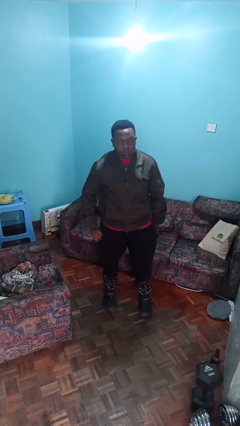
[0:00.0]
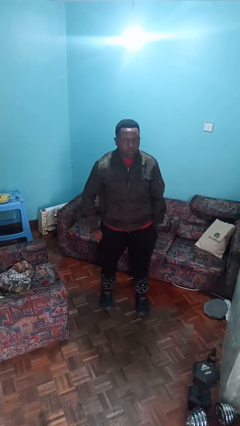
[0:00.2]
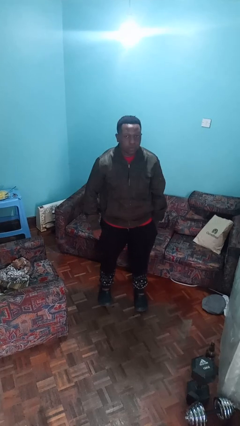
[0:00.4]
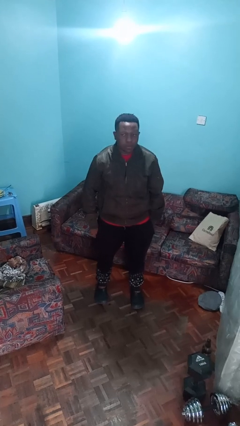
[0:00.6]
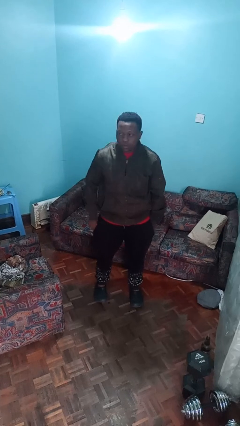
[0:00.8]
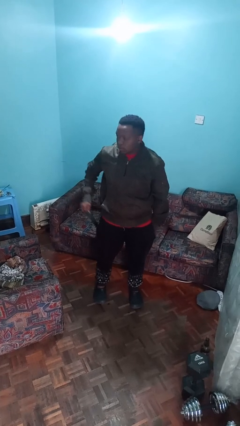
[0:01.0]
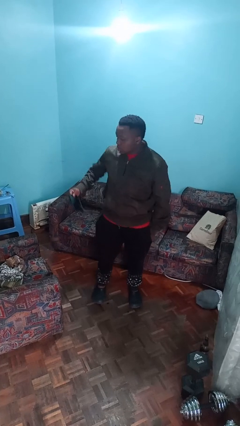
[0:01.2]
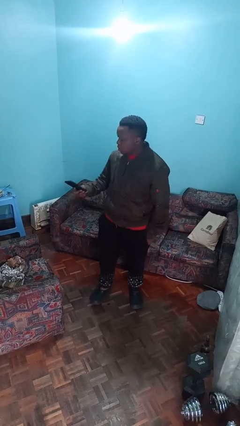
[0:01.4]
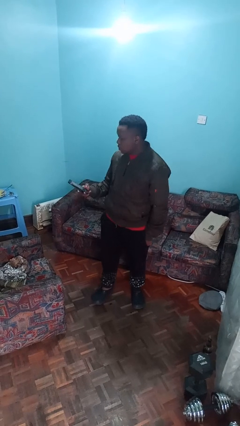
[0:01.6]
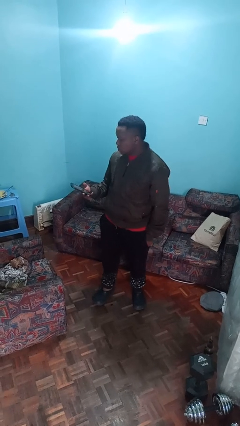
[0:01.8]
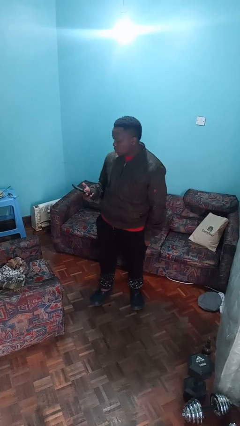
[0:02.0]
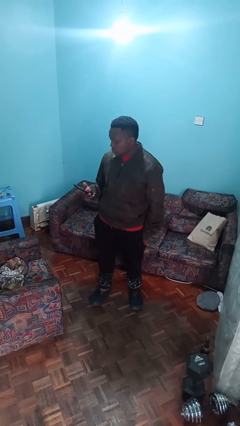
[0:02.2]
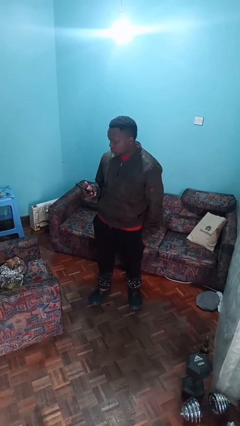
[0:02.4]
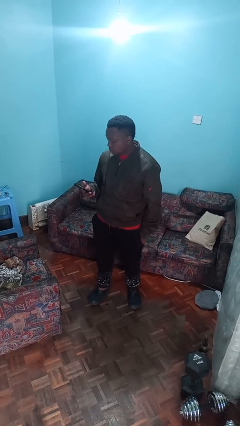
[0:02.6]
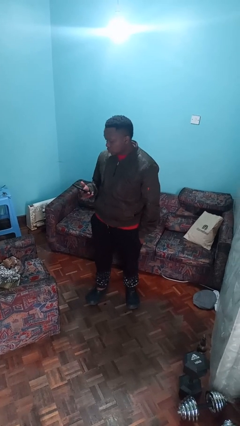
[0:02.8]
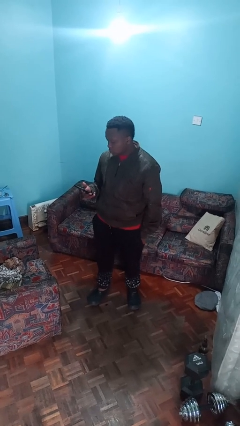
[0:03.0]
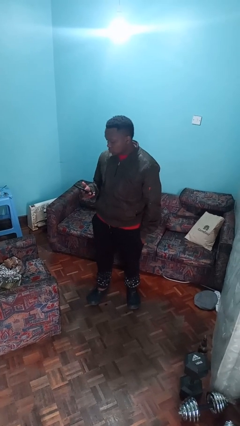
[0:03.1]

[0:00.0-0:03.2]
person takes phone from pocket

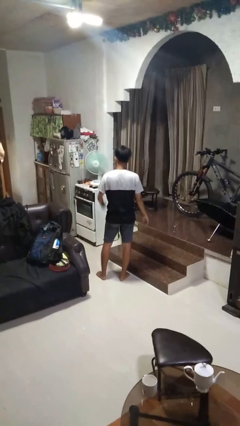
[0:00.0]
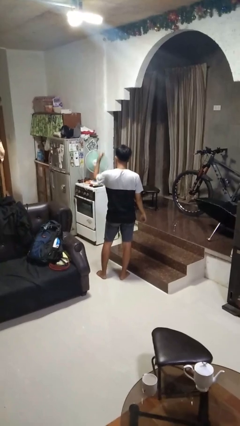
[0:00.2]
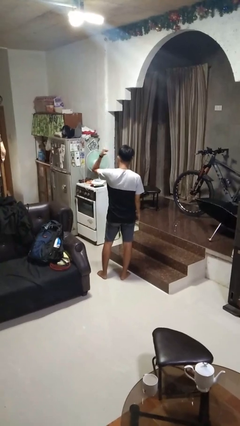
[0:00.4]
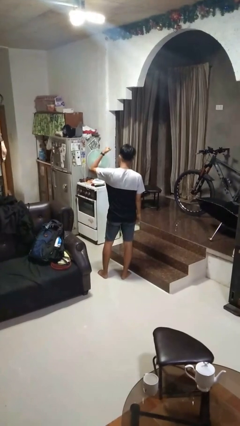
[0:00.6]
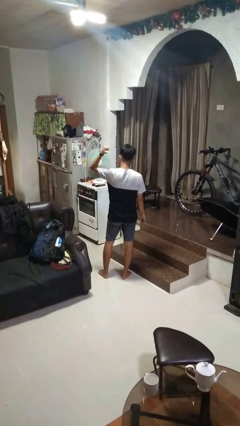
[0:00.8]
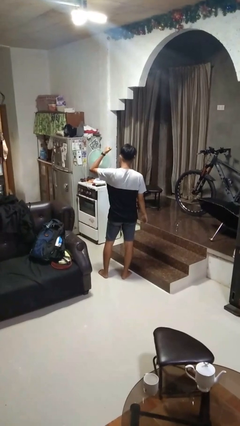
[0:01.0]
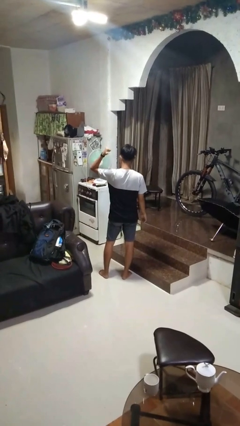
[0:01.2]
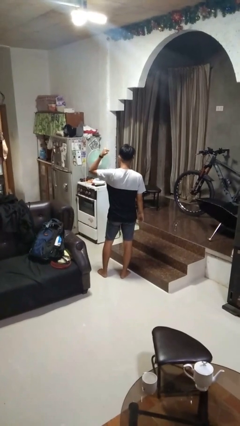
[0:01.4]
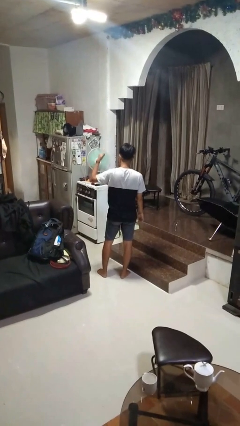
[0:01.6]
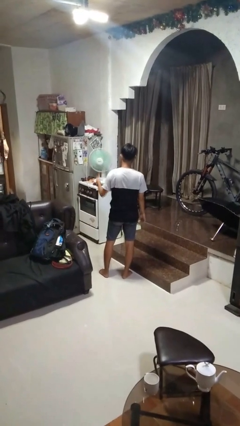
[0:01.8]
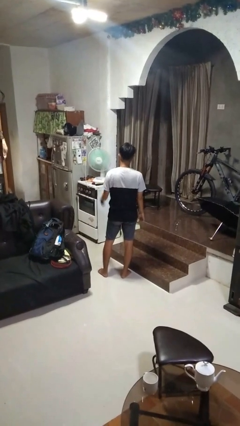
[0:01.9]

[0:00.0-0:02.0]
person gestures behind me

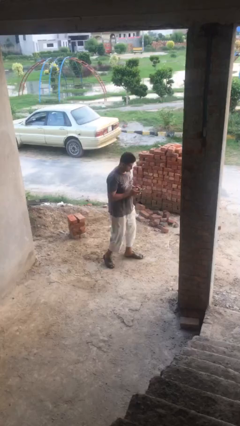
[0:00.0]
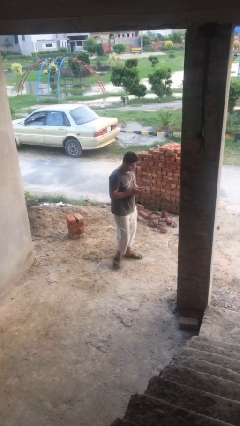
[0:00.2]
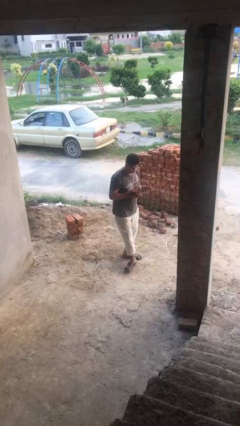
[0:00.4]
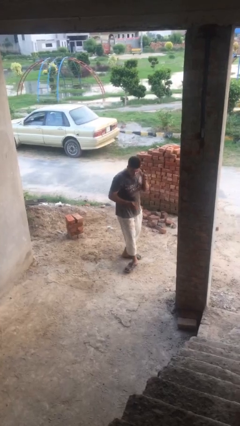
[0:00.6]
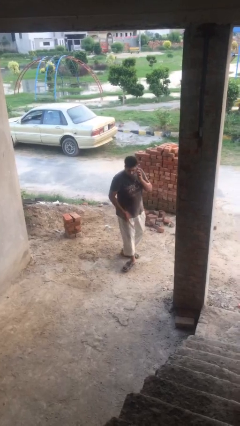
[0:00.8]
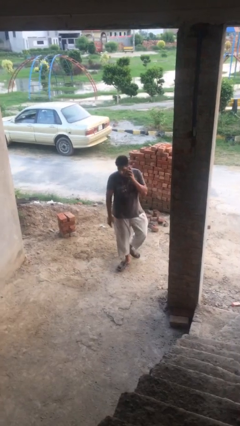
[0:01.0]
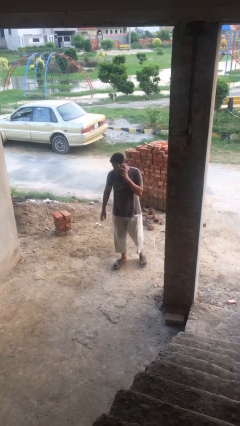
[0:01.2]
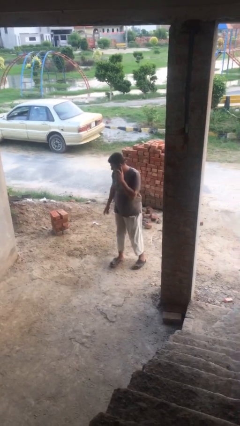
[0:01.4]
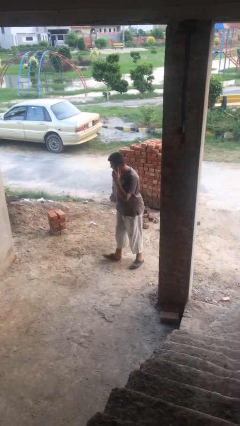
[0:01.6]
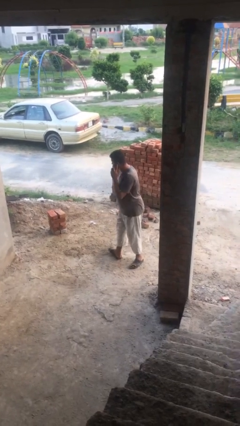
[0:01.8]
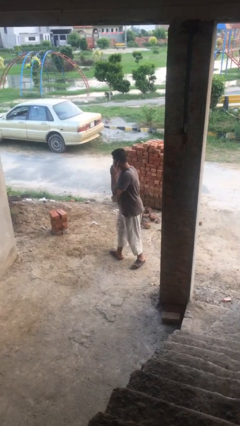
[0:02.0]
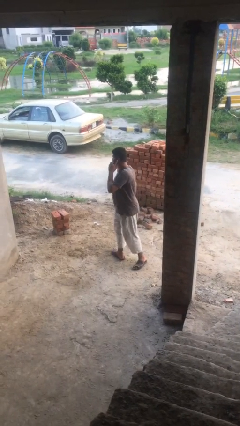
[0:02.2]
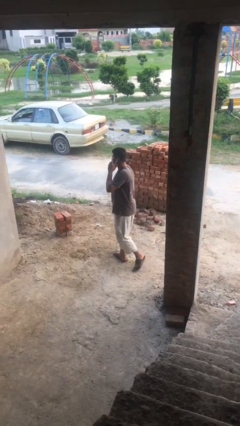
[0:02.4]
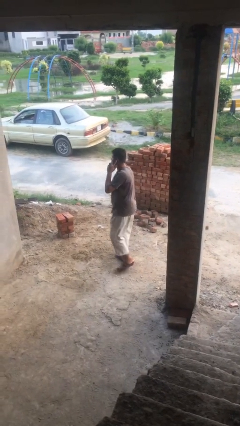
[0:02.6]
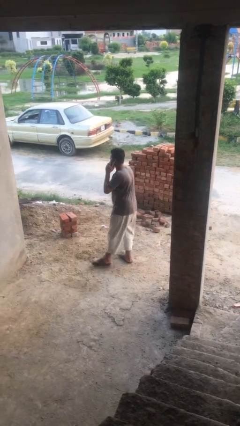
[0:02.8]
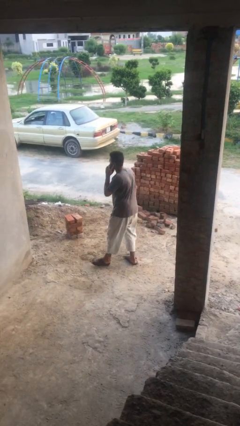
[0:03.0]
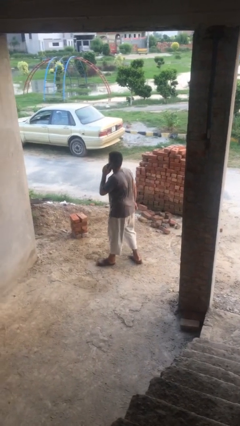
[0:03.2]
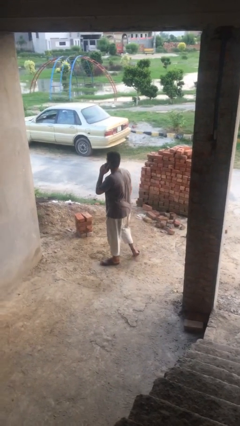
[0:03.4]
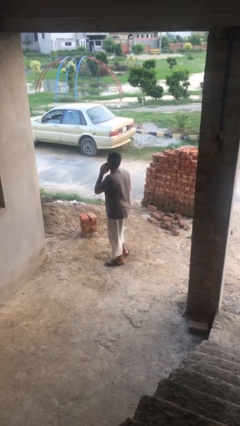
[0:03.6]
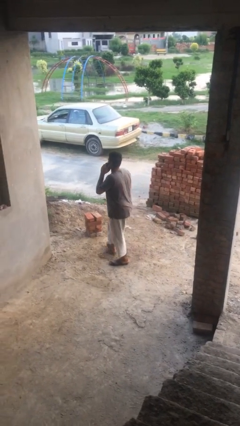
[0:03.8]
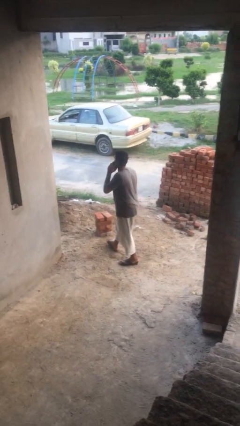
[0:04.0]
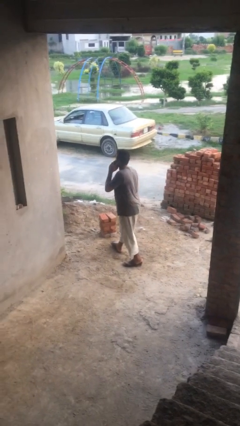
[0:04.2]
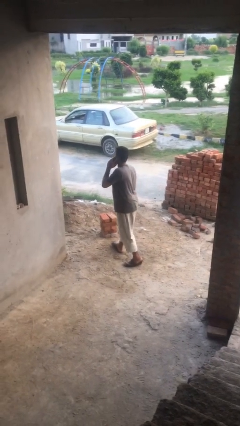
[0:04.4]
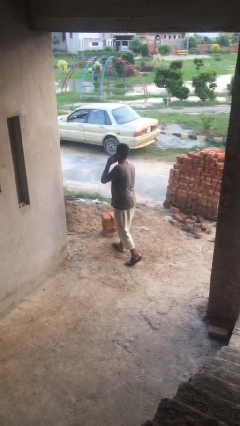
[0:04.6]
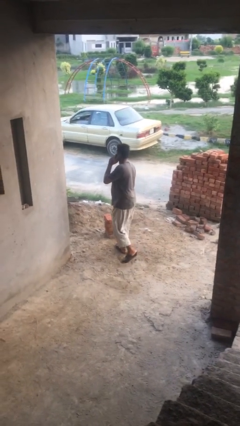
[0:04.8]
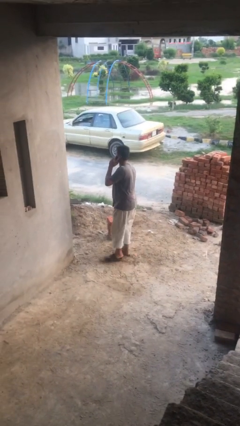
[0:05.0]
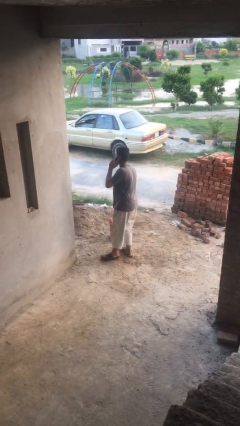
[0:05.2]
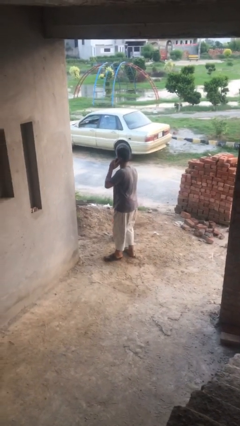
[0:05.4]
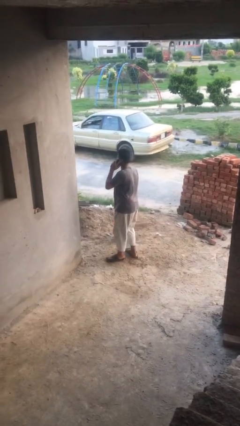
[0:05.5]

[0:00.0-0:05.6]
person talks on phone

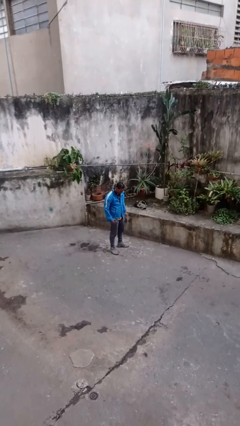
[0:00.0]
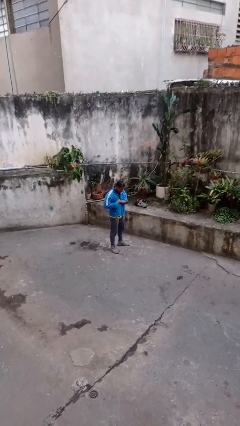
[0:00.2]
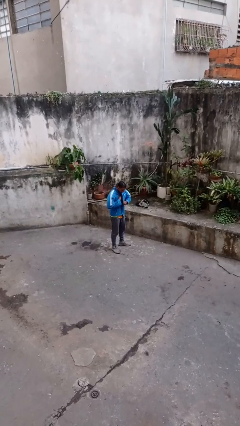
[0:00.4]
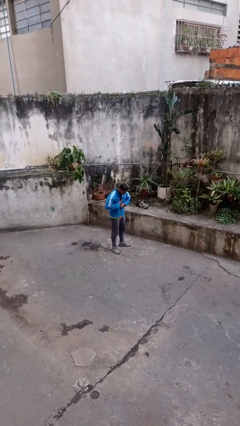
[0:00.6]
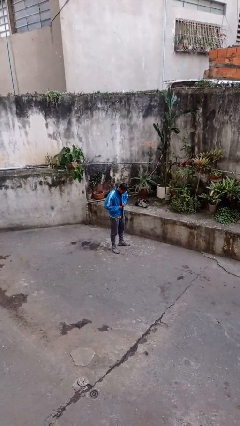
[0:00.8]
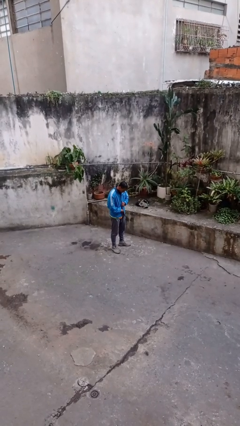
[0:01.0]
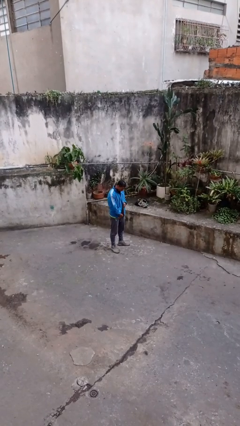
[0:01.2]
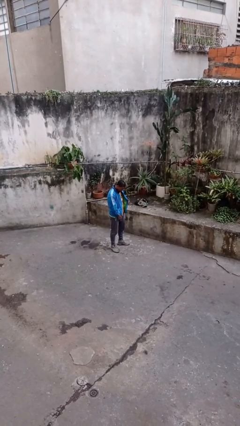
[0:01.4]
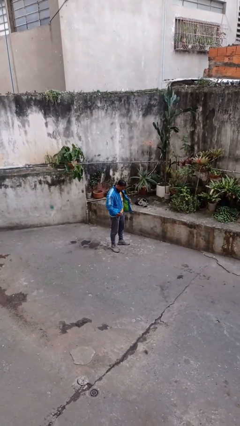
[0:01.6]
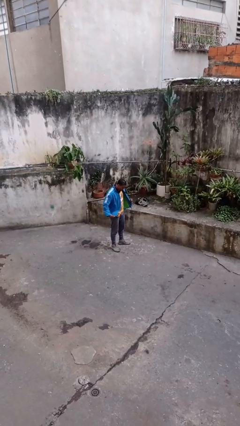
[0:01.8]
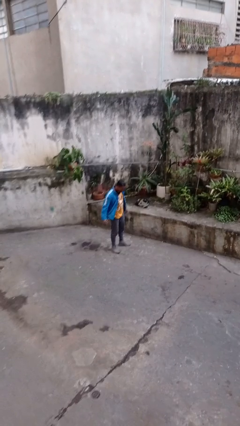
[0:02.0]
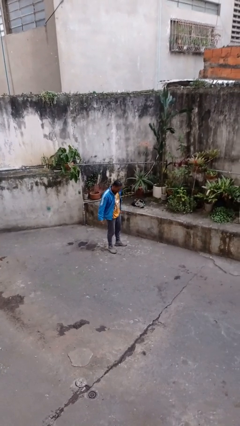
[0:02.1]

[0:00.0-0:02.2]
person unzips jacket

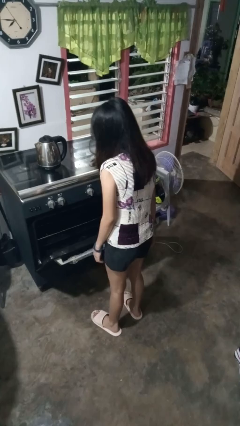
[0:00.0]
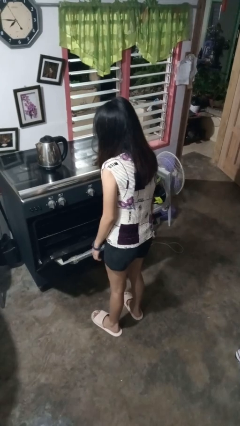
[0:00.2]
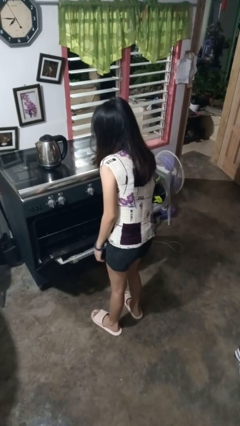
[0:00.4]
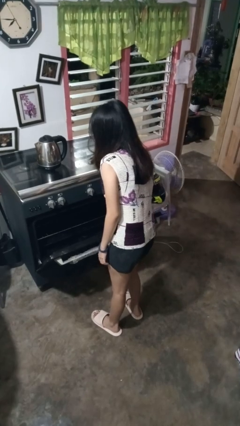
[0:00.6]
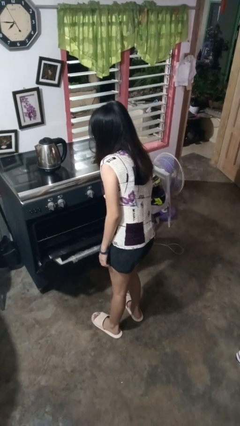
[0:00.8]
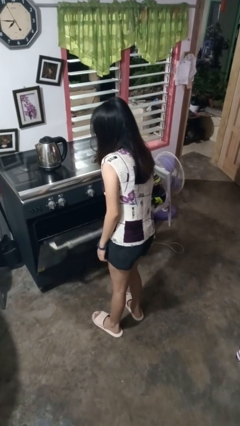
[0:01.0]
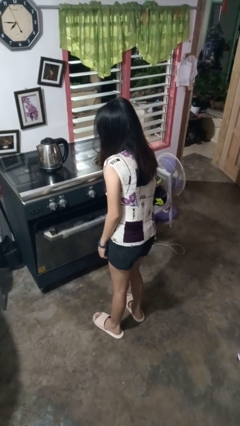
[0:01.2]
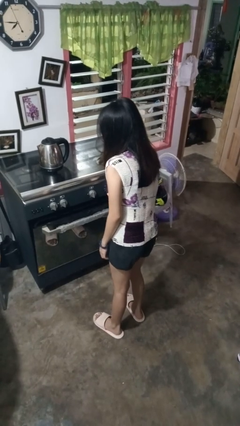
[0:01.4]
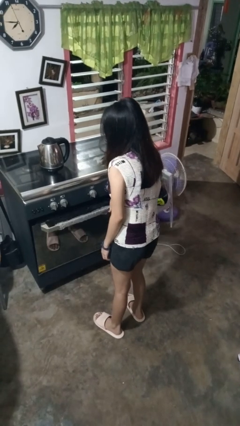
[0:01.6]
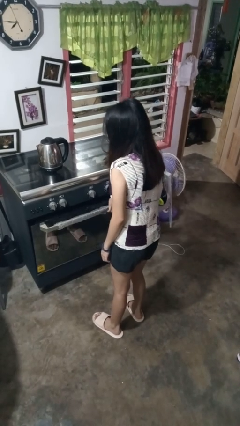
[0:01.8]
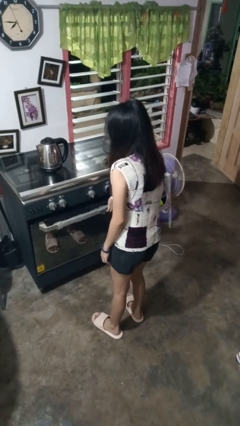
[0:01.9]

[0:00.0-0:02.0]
person closes oven door

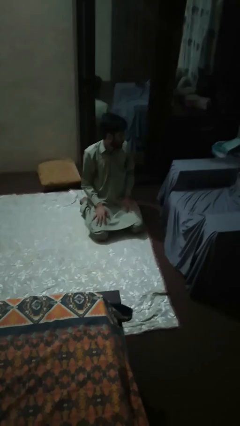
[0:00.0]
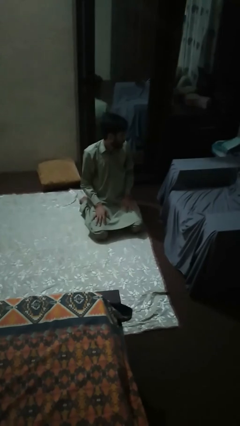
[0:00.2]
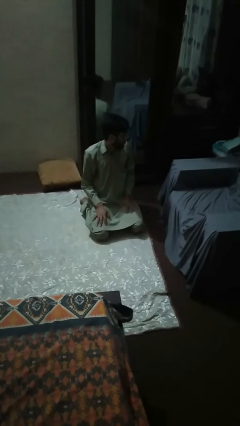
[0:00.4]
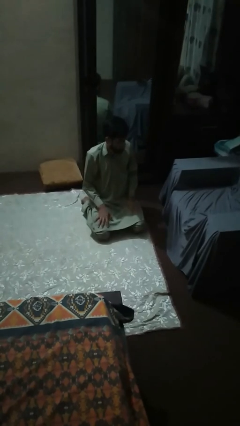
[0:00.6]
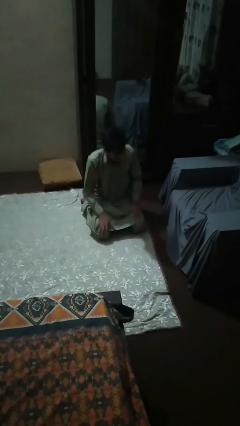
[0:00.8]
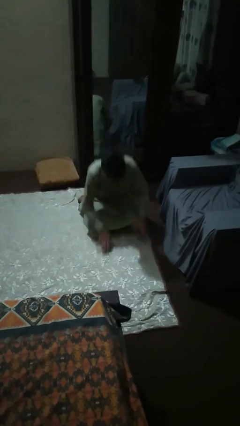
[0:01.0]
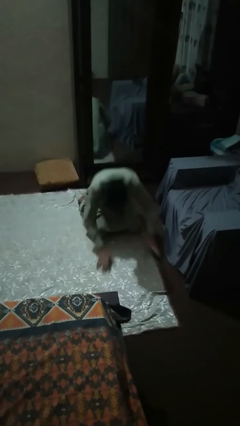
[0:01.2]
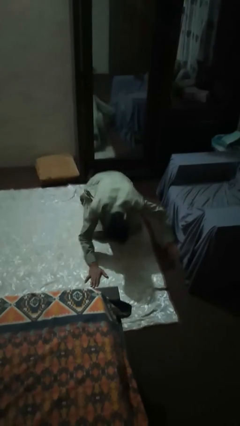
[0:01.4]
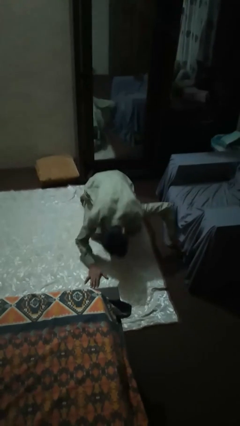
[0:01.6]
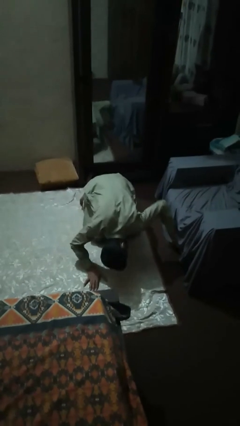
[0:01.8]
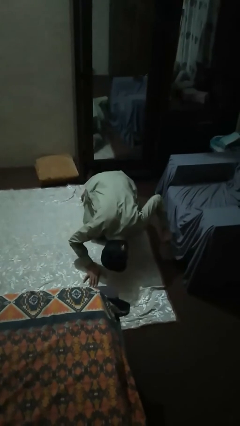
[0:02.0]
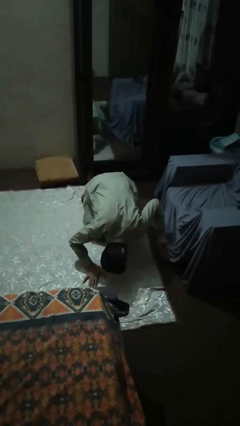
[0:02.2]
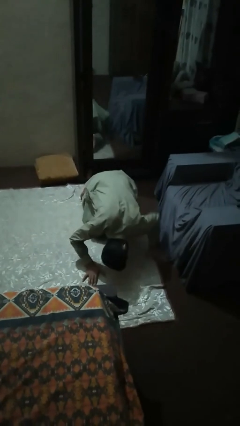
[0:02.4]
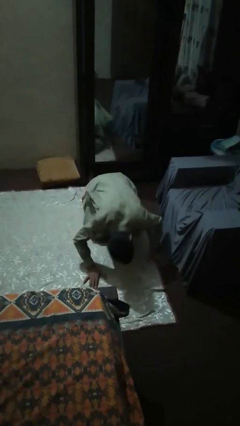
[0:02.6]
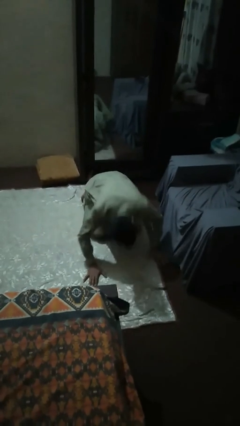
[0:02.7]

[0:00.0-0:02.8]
person searches under couch
